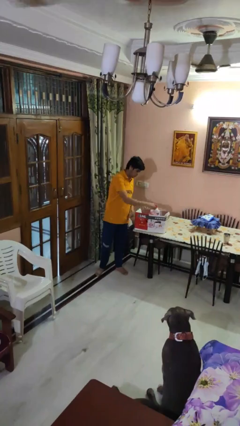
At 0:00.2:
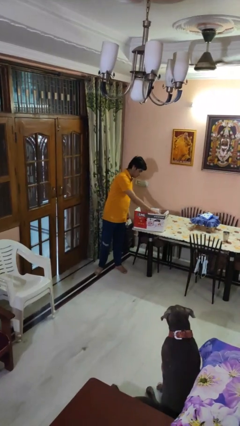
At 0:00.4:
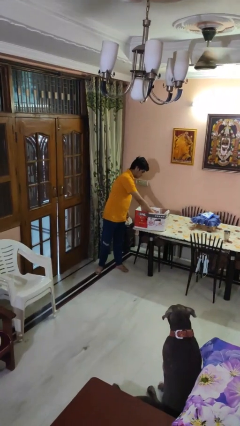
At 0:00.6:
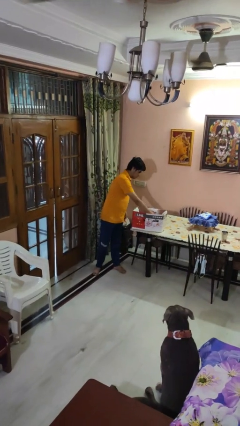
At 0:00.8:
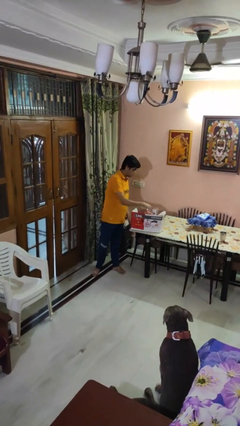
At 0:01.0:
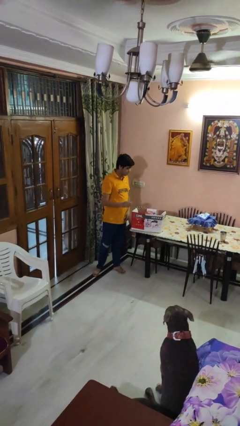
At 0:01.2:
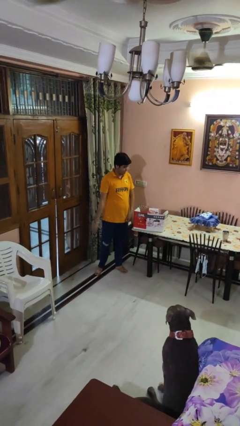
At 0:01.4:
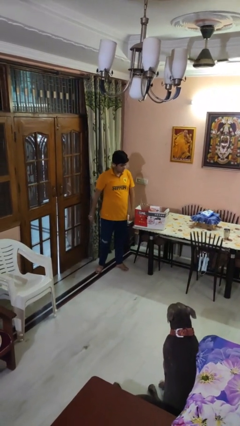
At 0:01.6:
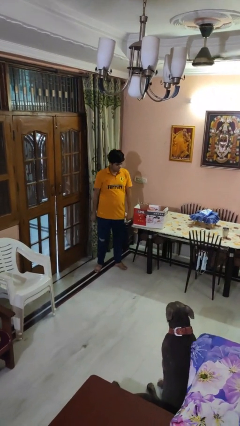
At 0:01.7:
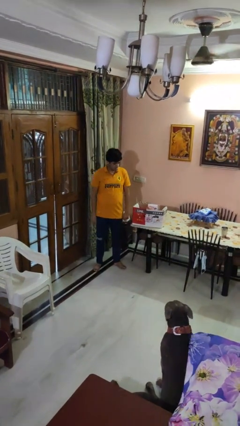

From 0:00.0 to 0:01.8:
person puts object into box

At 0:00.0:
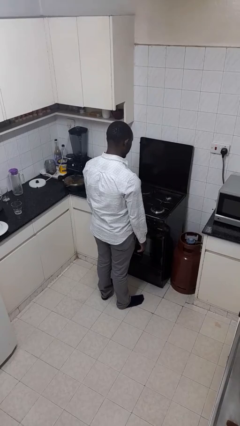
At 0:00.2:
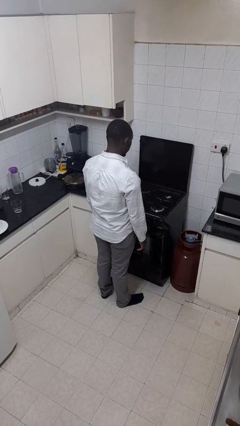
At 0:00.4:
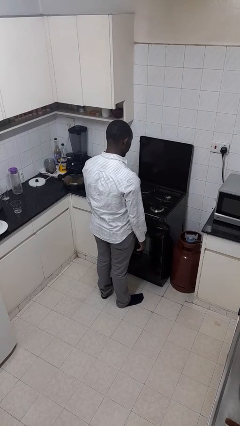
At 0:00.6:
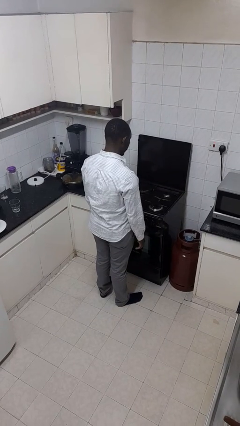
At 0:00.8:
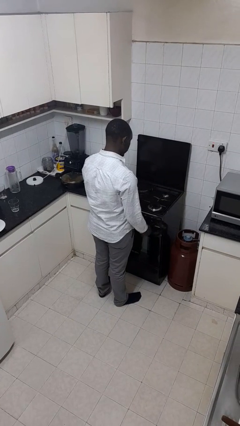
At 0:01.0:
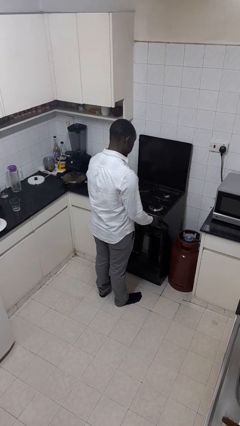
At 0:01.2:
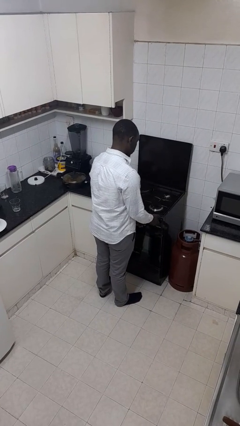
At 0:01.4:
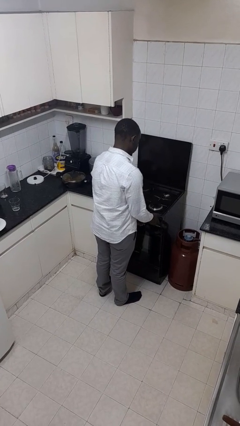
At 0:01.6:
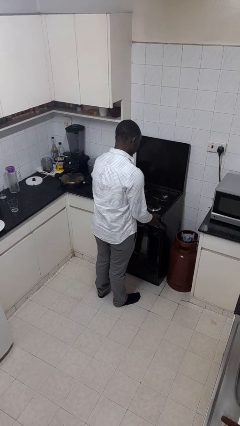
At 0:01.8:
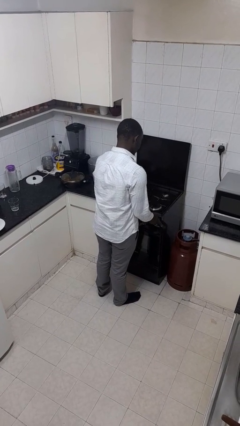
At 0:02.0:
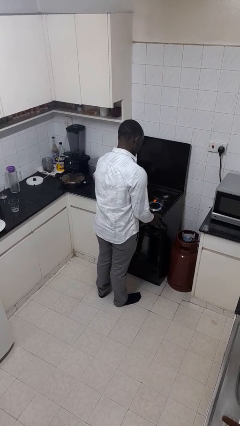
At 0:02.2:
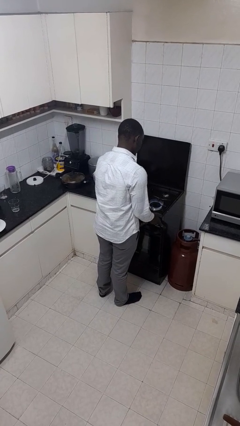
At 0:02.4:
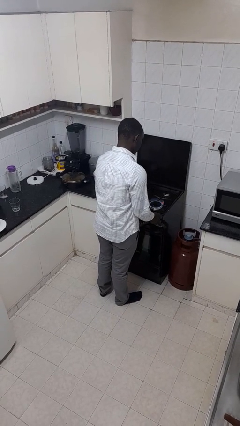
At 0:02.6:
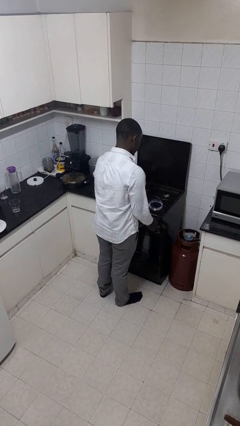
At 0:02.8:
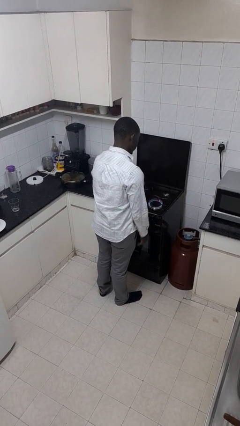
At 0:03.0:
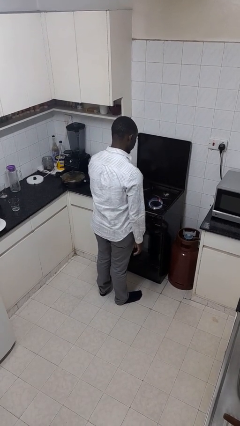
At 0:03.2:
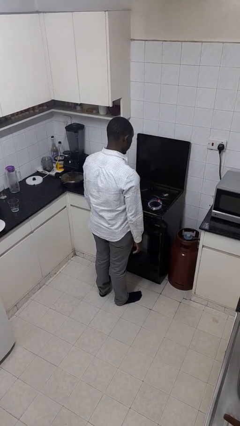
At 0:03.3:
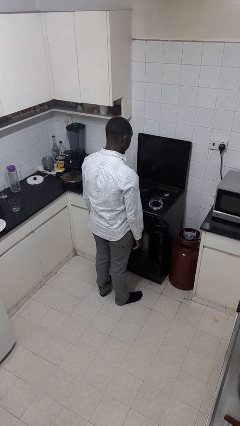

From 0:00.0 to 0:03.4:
person turns on stovetop

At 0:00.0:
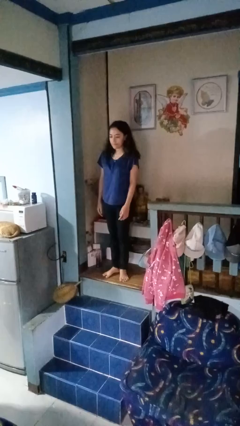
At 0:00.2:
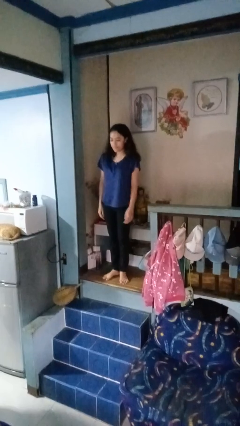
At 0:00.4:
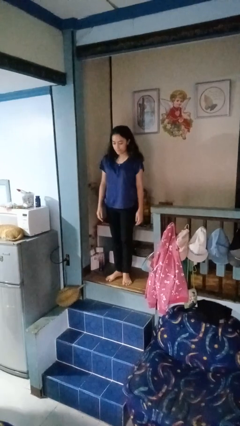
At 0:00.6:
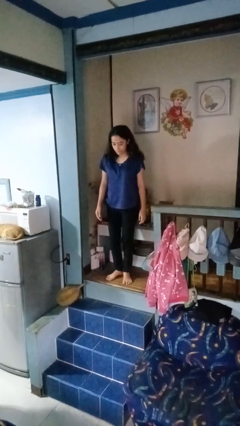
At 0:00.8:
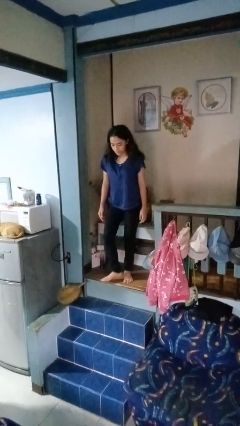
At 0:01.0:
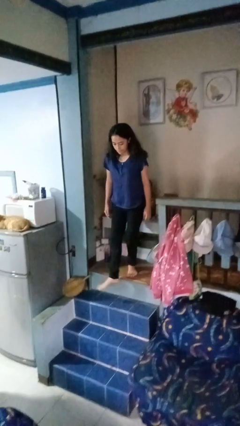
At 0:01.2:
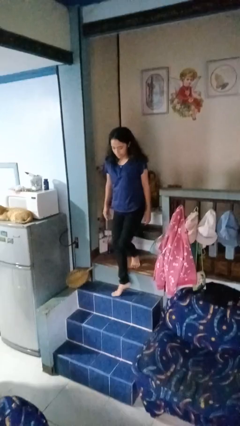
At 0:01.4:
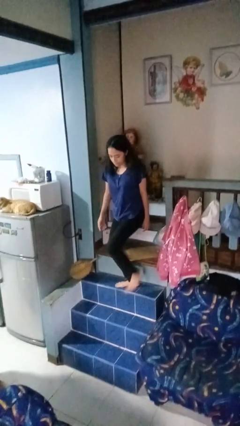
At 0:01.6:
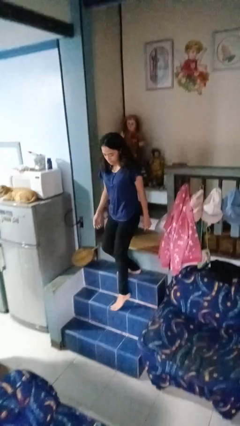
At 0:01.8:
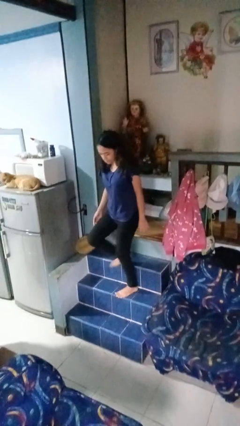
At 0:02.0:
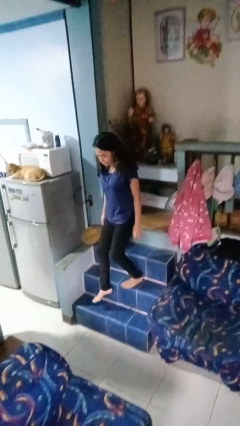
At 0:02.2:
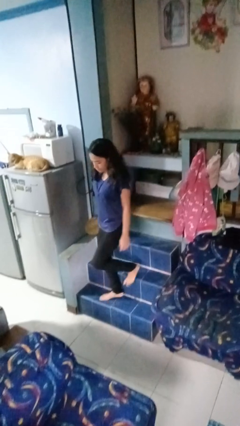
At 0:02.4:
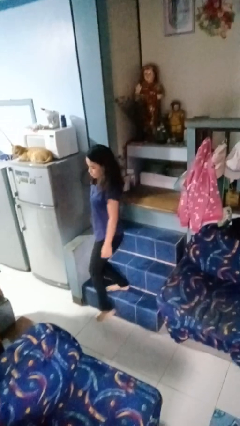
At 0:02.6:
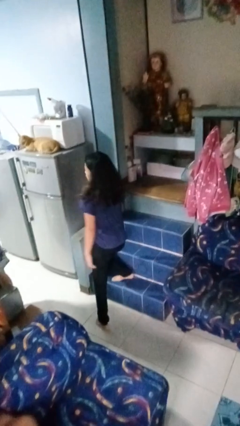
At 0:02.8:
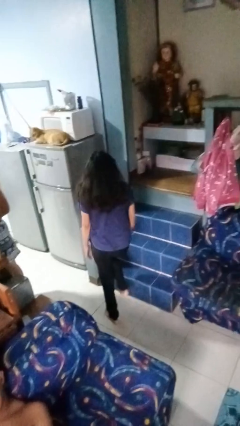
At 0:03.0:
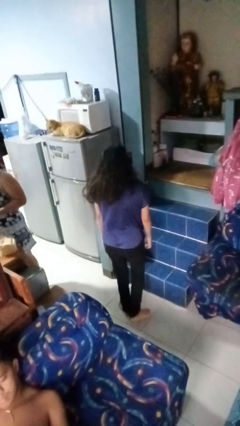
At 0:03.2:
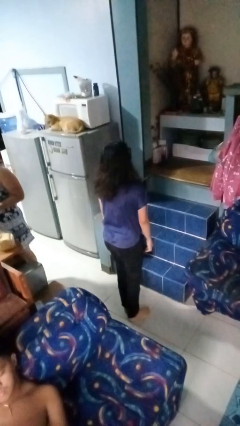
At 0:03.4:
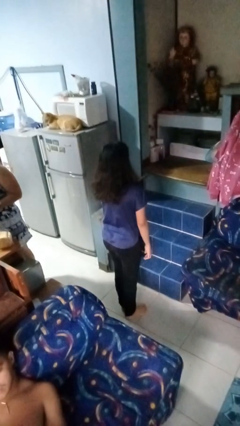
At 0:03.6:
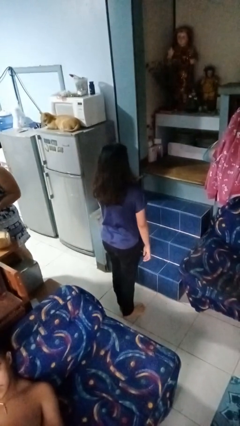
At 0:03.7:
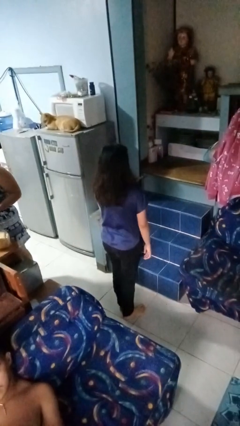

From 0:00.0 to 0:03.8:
person climbs down stairs

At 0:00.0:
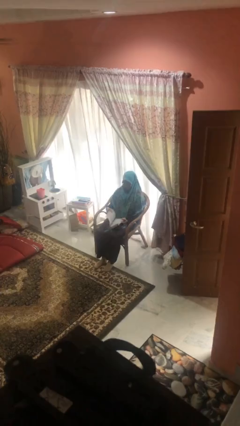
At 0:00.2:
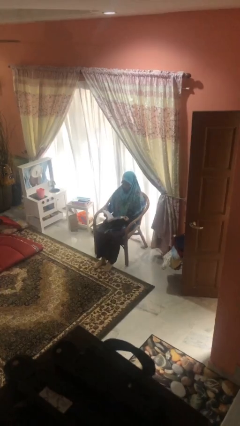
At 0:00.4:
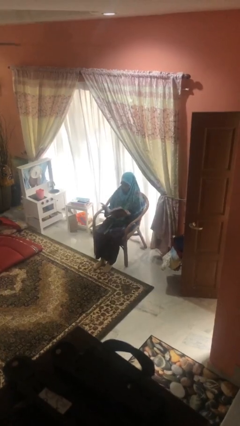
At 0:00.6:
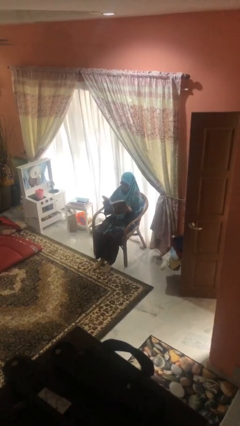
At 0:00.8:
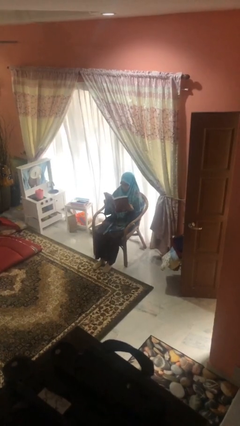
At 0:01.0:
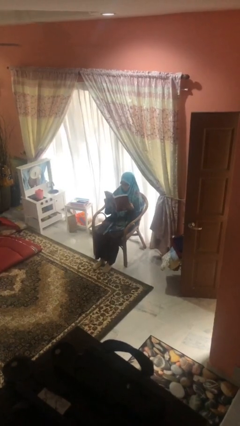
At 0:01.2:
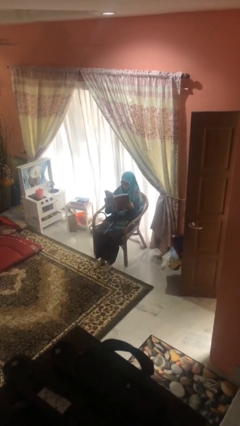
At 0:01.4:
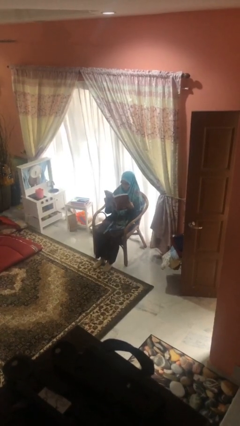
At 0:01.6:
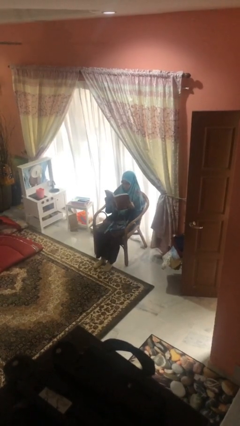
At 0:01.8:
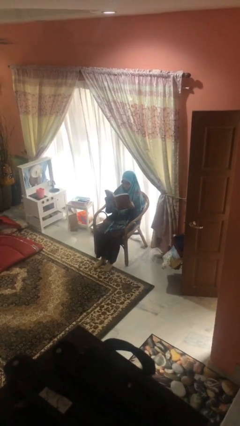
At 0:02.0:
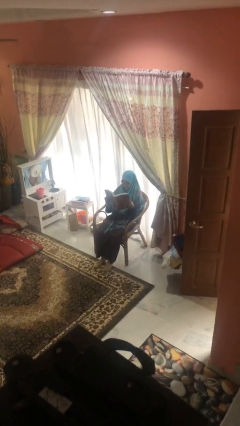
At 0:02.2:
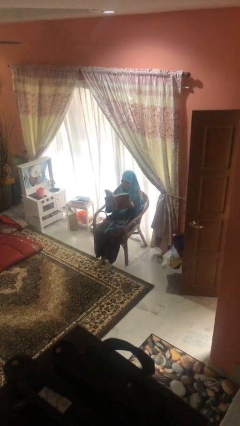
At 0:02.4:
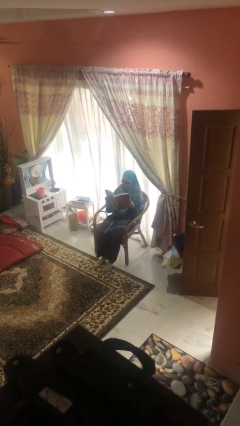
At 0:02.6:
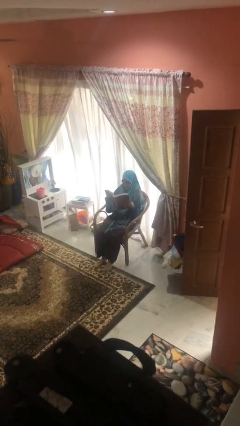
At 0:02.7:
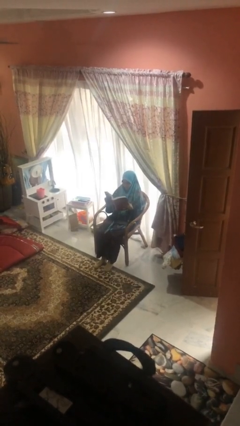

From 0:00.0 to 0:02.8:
person reads document

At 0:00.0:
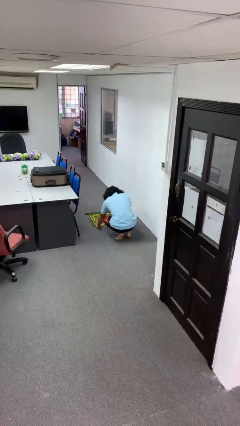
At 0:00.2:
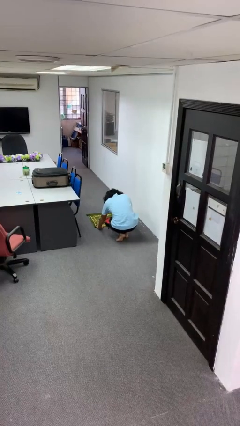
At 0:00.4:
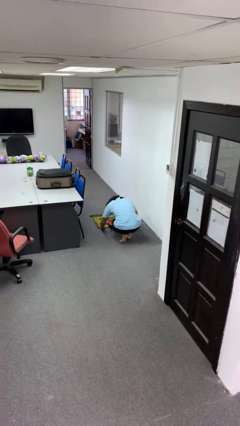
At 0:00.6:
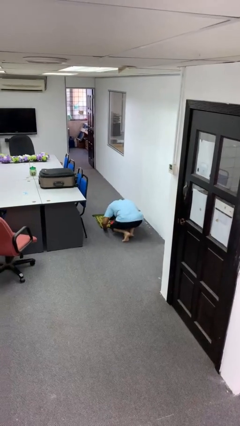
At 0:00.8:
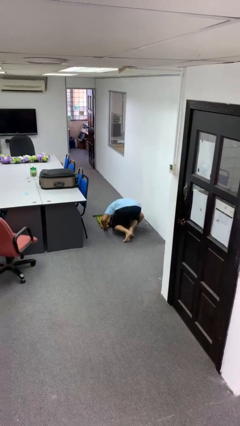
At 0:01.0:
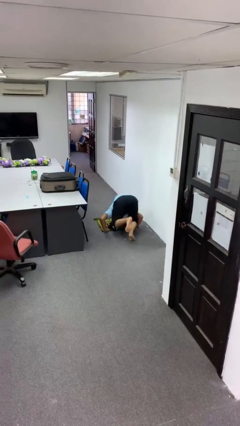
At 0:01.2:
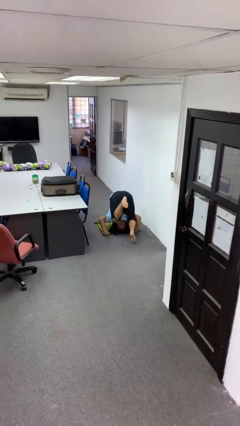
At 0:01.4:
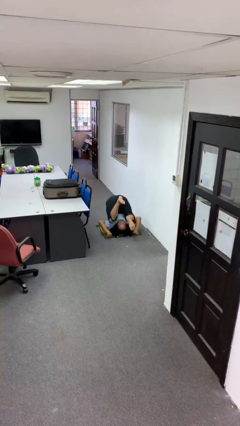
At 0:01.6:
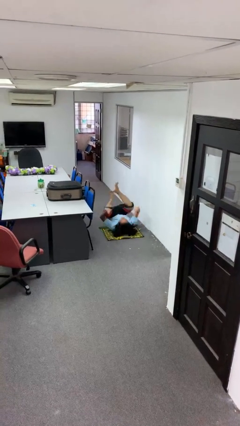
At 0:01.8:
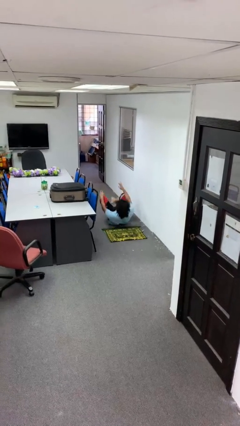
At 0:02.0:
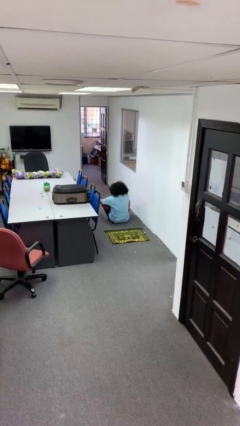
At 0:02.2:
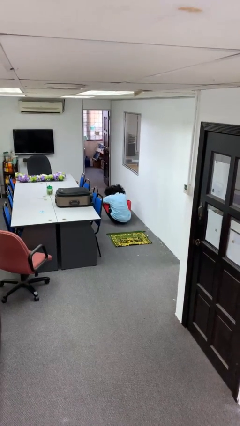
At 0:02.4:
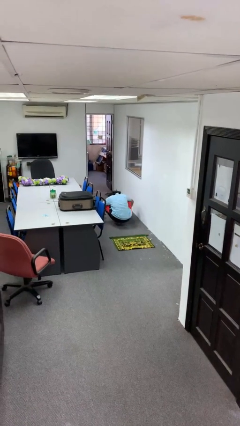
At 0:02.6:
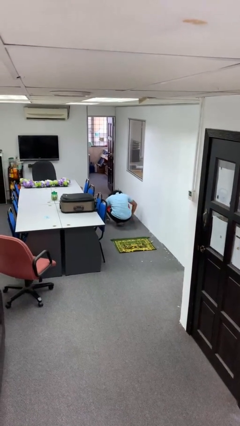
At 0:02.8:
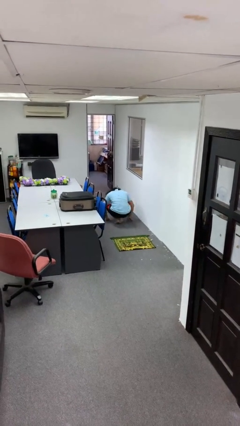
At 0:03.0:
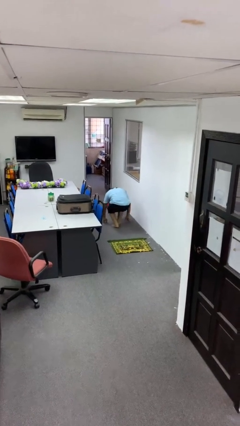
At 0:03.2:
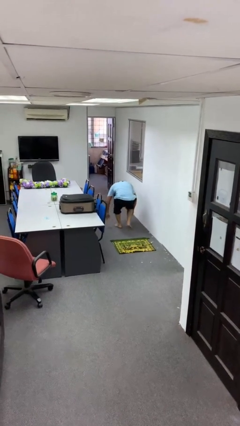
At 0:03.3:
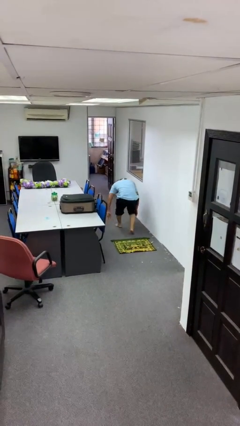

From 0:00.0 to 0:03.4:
person somersaults

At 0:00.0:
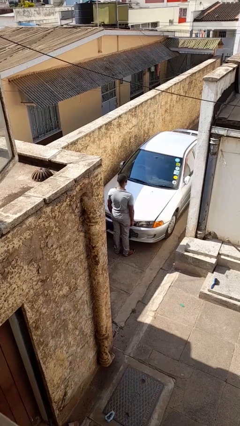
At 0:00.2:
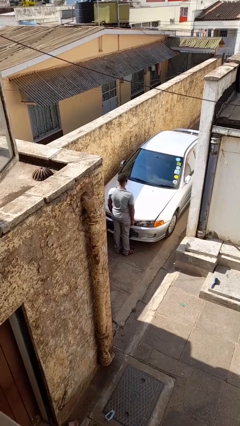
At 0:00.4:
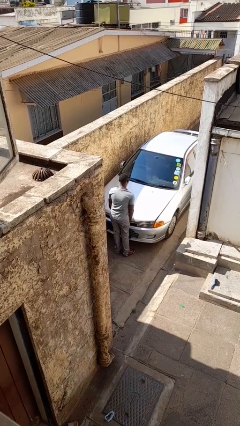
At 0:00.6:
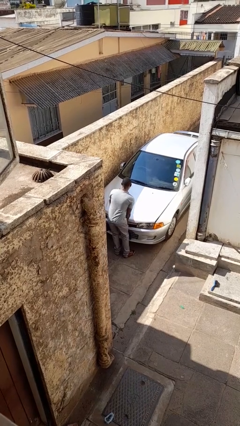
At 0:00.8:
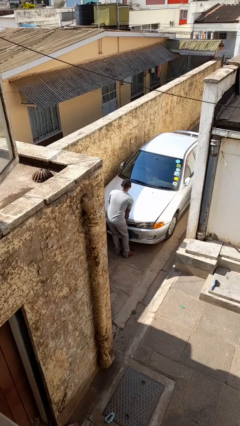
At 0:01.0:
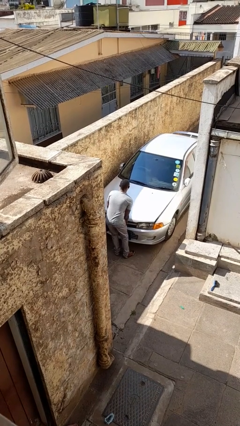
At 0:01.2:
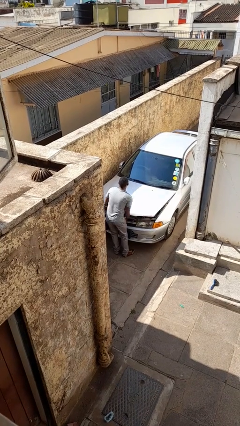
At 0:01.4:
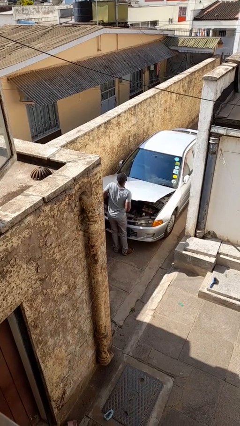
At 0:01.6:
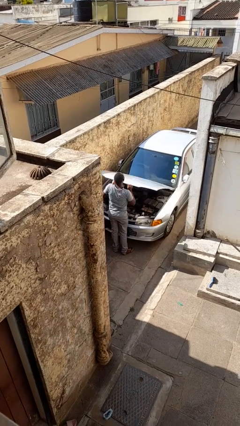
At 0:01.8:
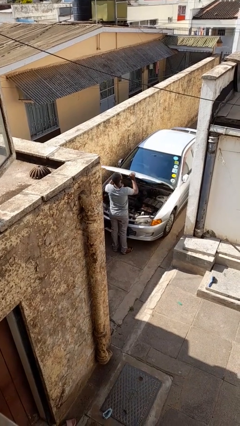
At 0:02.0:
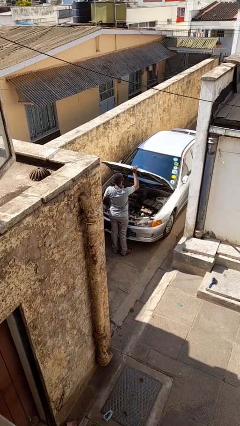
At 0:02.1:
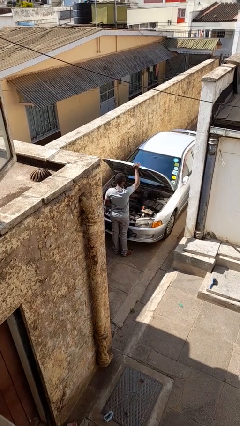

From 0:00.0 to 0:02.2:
person opens car hood
